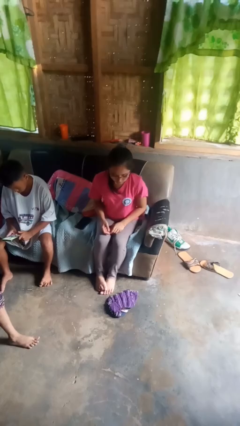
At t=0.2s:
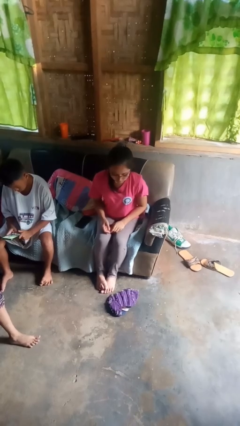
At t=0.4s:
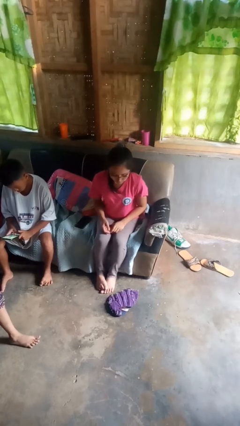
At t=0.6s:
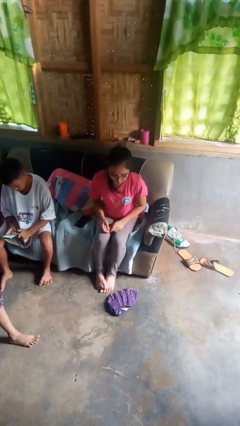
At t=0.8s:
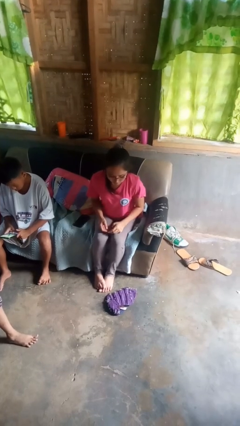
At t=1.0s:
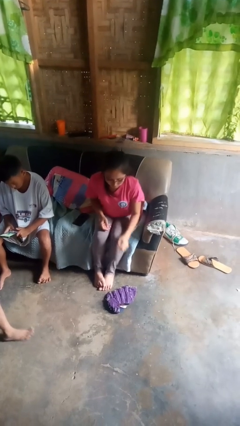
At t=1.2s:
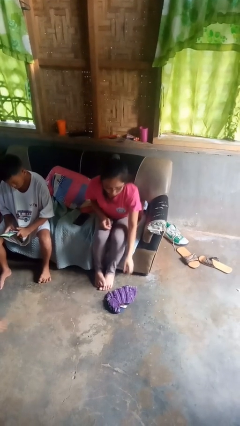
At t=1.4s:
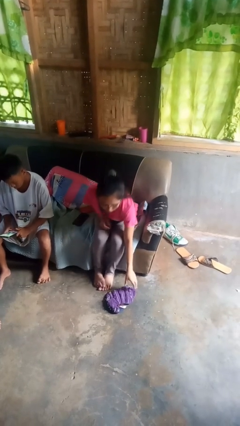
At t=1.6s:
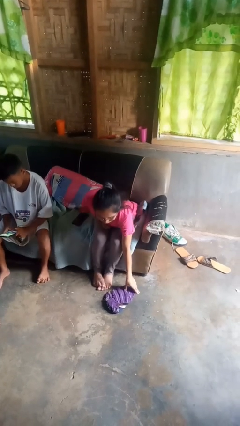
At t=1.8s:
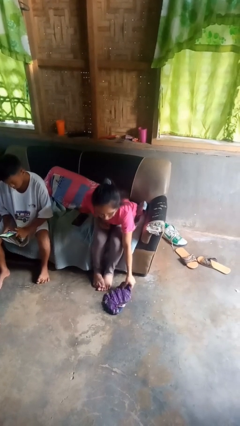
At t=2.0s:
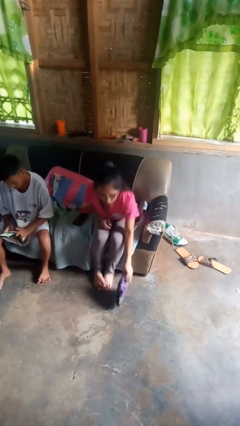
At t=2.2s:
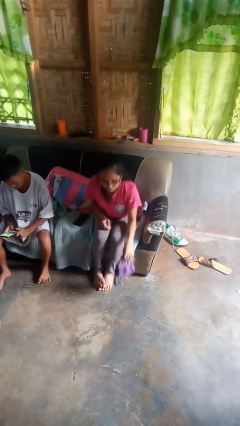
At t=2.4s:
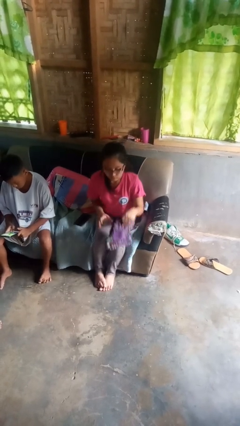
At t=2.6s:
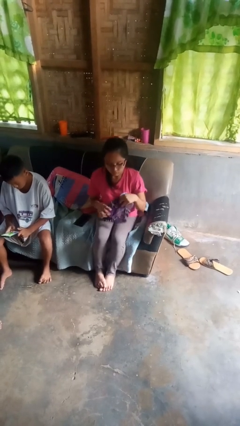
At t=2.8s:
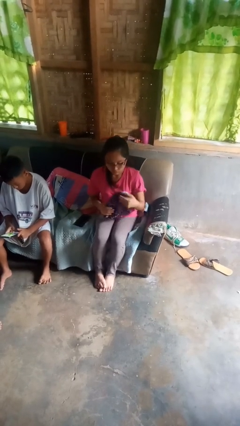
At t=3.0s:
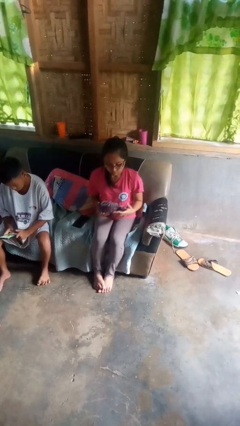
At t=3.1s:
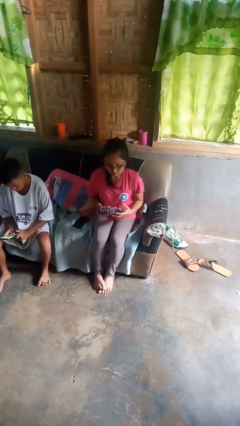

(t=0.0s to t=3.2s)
person picks up object from floor

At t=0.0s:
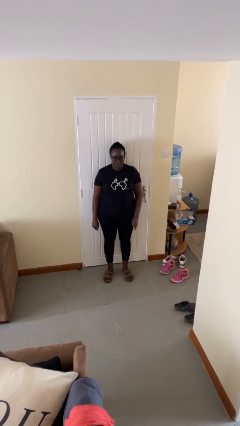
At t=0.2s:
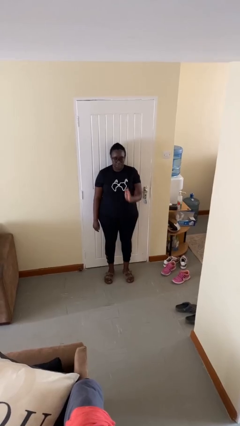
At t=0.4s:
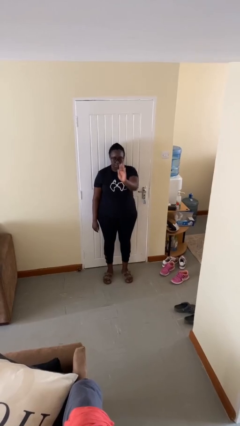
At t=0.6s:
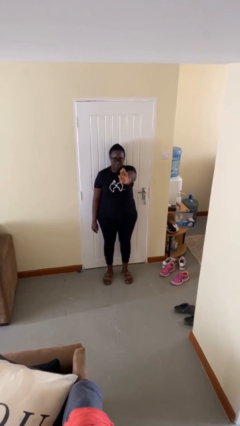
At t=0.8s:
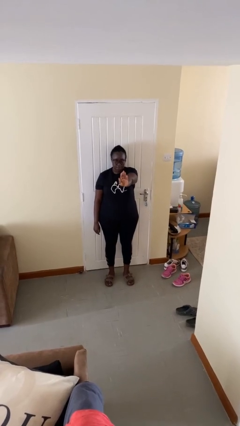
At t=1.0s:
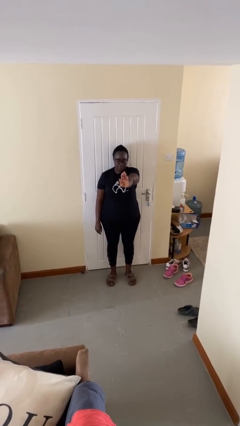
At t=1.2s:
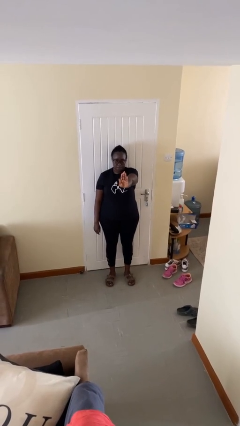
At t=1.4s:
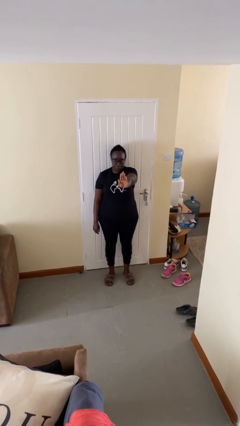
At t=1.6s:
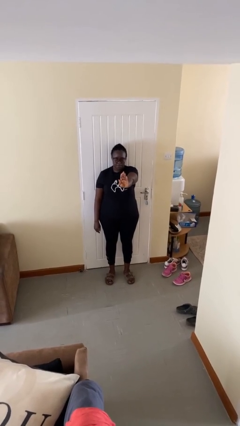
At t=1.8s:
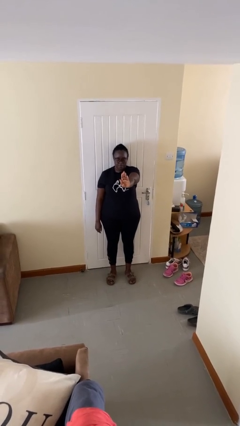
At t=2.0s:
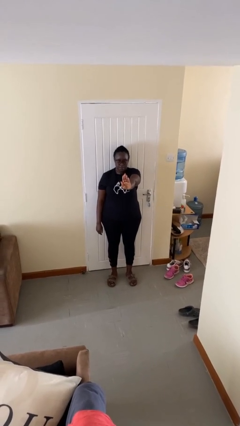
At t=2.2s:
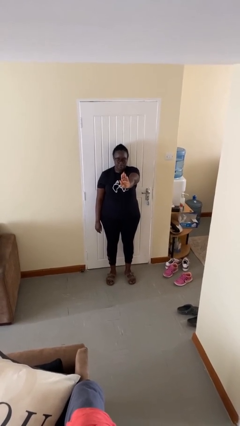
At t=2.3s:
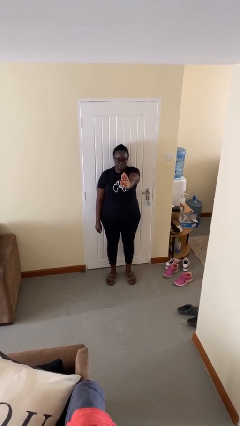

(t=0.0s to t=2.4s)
person gestures stop

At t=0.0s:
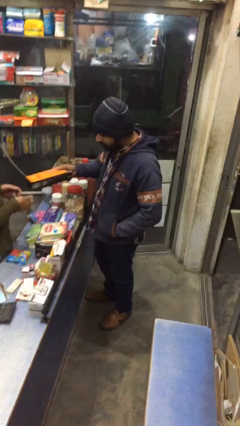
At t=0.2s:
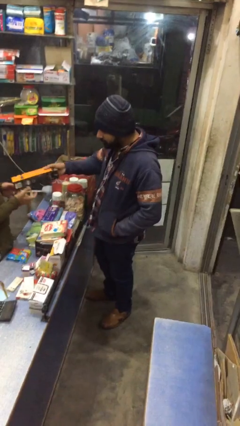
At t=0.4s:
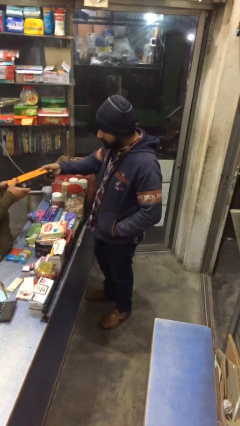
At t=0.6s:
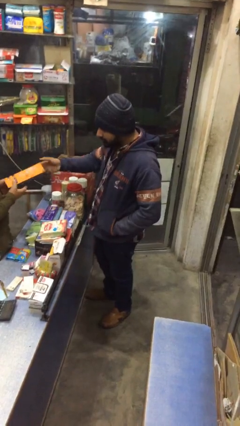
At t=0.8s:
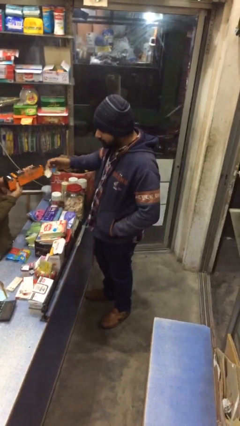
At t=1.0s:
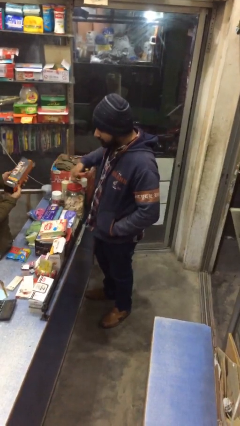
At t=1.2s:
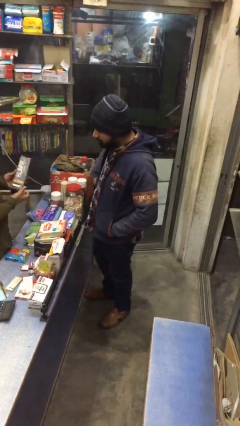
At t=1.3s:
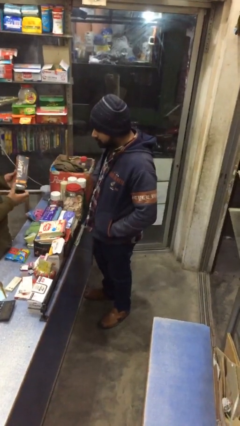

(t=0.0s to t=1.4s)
person transfers object to person

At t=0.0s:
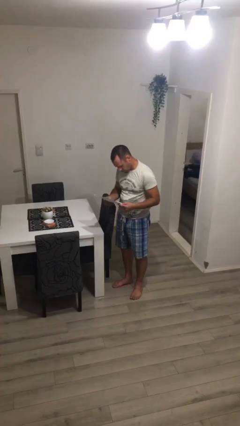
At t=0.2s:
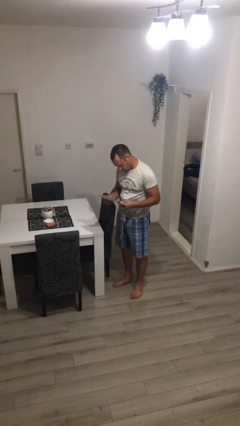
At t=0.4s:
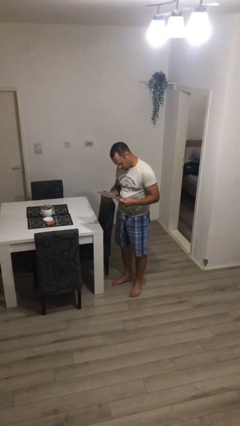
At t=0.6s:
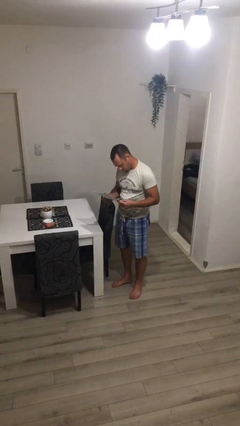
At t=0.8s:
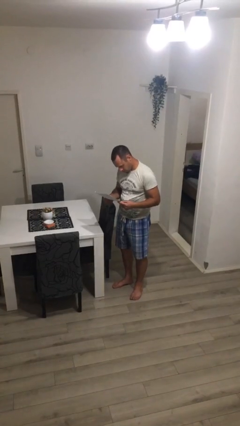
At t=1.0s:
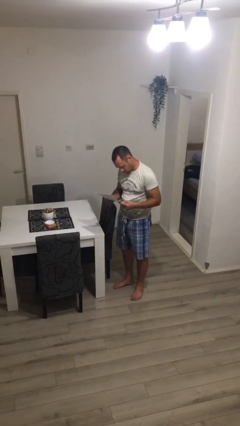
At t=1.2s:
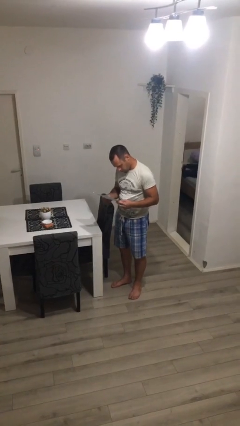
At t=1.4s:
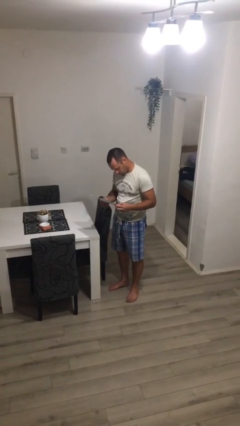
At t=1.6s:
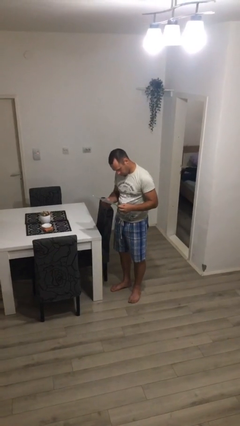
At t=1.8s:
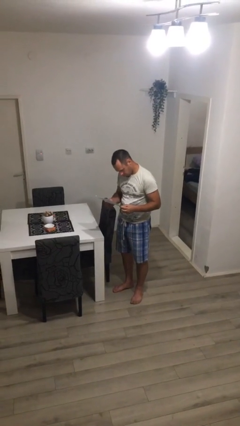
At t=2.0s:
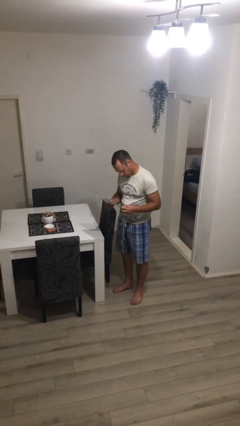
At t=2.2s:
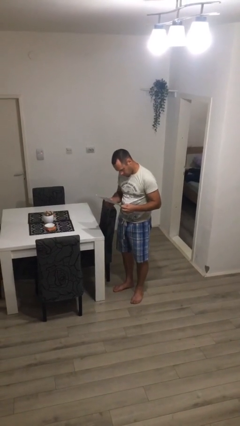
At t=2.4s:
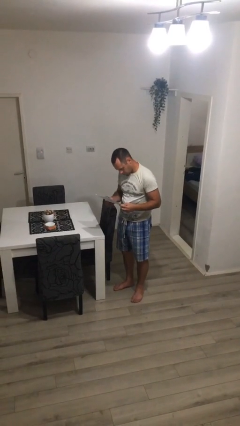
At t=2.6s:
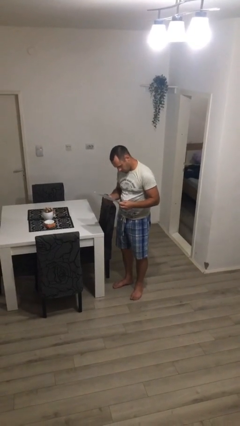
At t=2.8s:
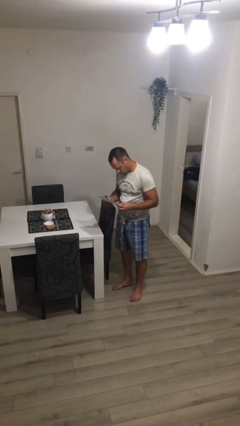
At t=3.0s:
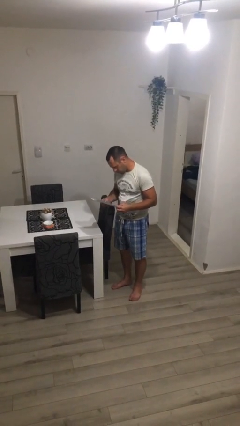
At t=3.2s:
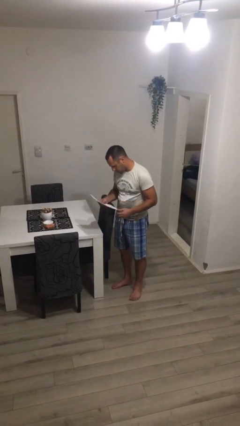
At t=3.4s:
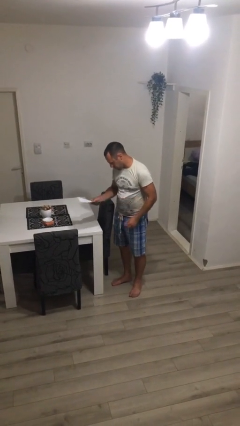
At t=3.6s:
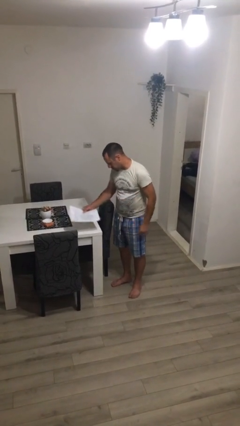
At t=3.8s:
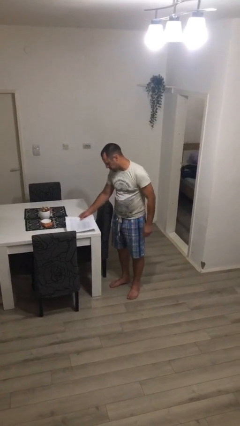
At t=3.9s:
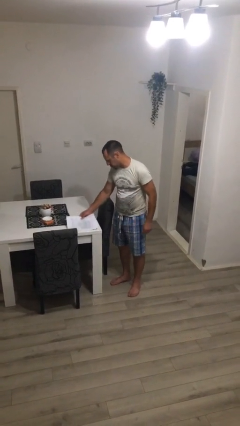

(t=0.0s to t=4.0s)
person reads document

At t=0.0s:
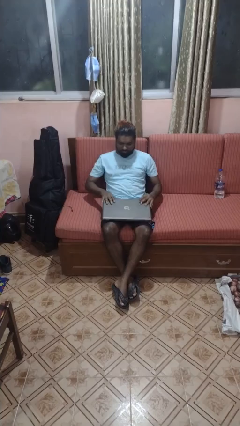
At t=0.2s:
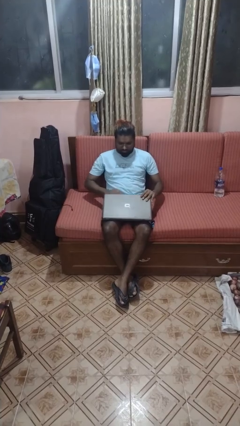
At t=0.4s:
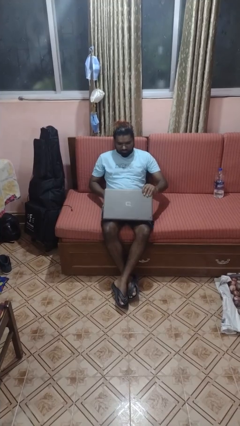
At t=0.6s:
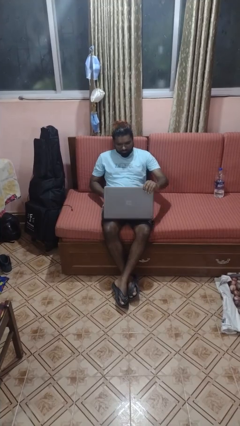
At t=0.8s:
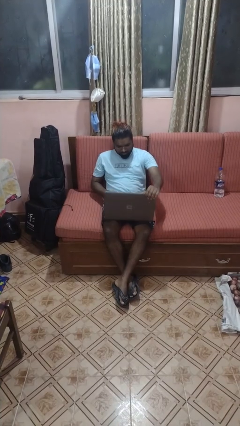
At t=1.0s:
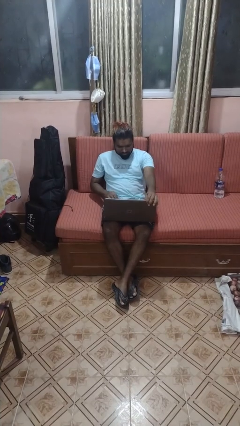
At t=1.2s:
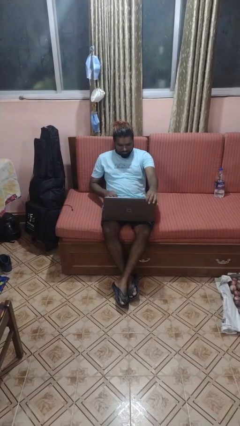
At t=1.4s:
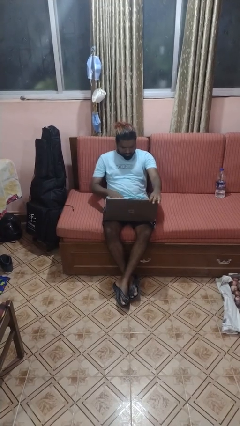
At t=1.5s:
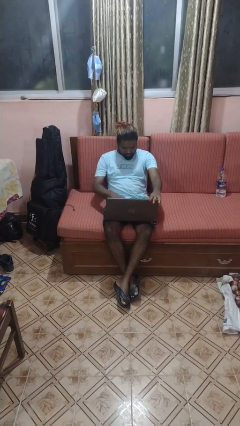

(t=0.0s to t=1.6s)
person opens laptop

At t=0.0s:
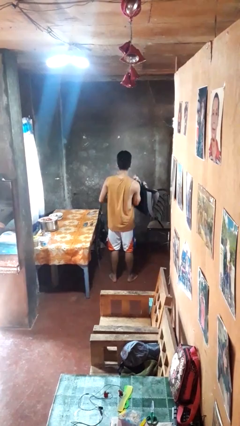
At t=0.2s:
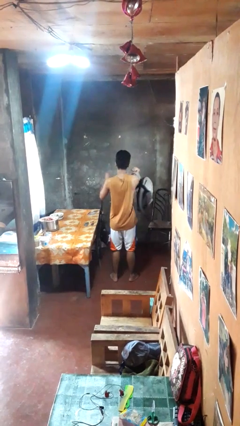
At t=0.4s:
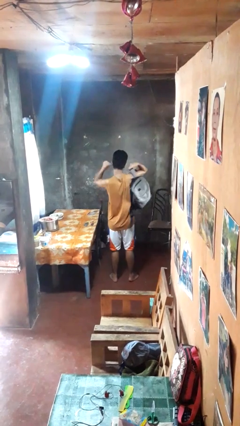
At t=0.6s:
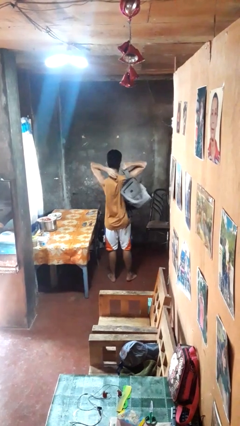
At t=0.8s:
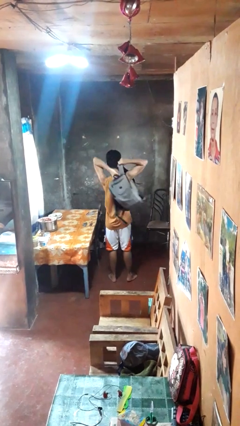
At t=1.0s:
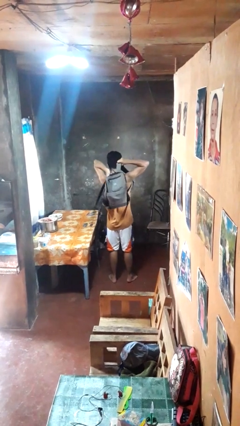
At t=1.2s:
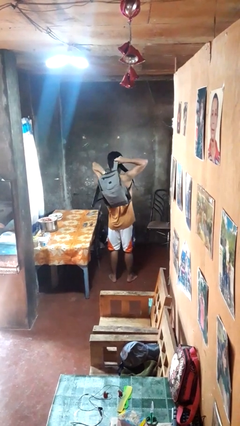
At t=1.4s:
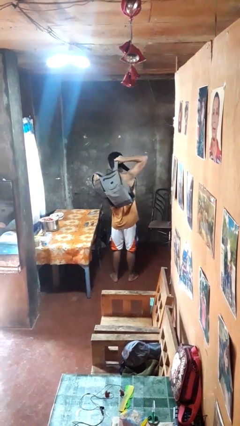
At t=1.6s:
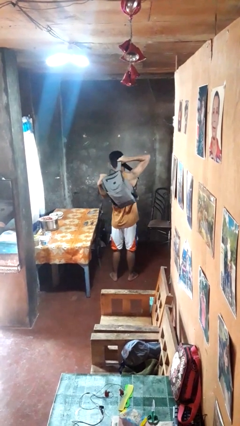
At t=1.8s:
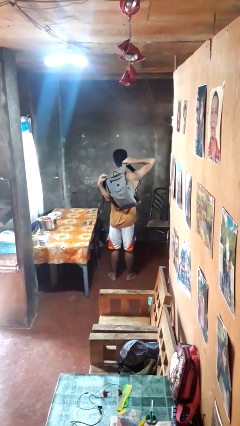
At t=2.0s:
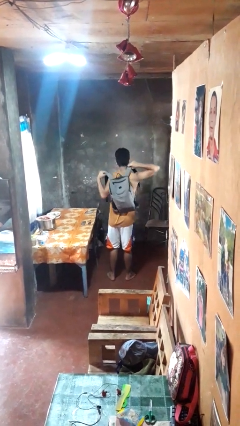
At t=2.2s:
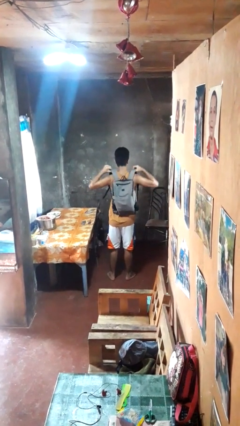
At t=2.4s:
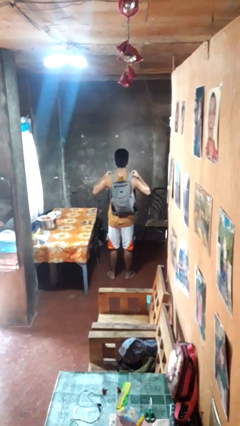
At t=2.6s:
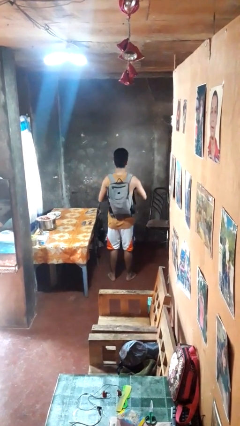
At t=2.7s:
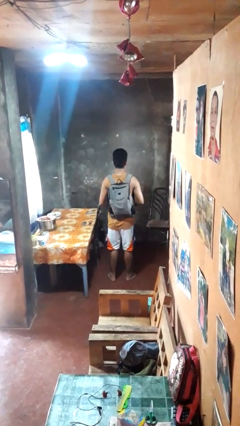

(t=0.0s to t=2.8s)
person puts on backpack

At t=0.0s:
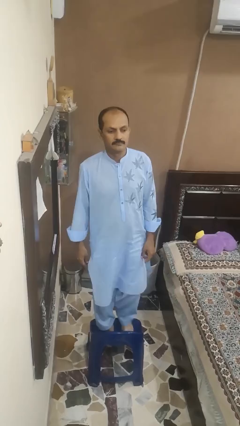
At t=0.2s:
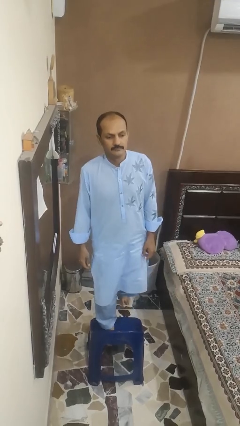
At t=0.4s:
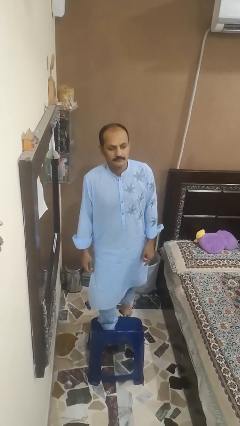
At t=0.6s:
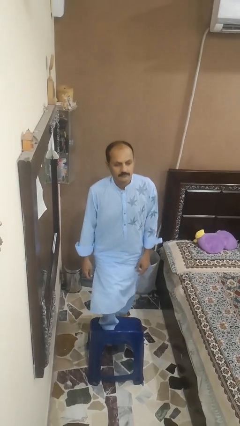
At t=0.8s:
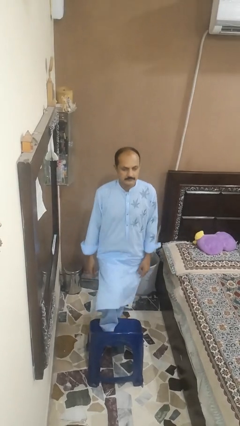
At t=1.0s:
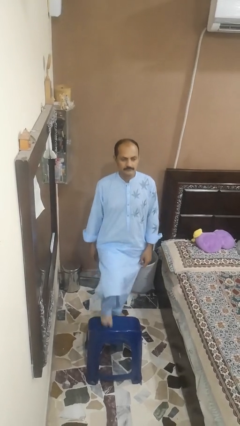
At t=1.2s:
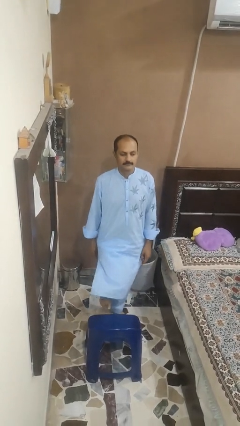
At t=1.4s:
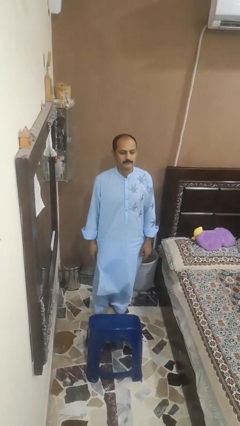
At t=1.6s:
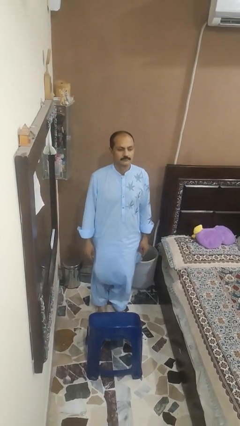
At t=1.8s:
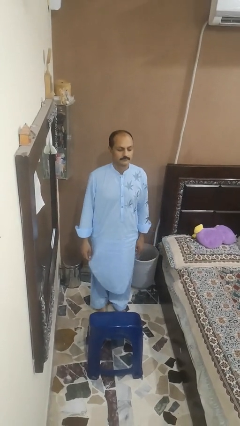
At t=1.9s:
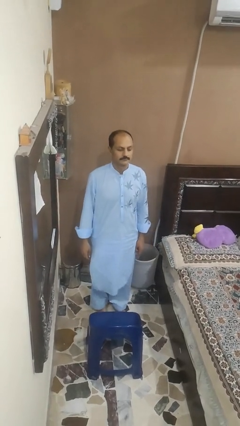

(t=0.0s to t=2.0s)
person climbs off chair
